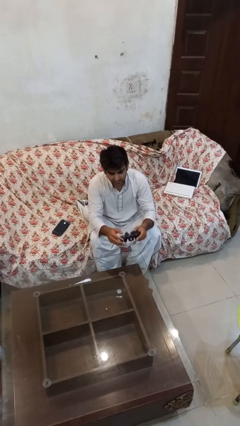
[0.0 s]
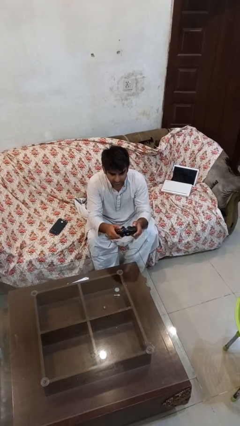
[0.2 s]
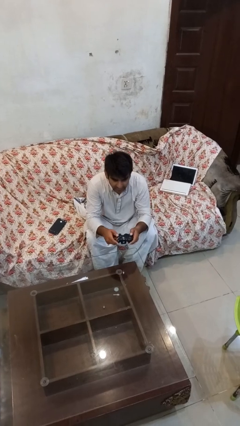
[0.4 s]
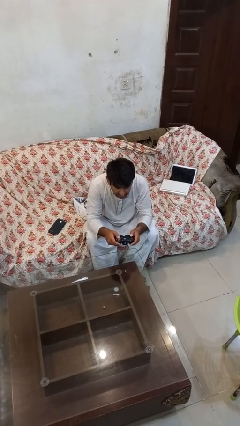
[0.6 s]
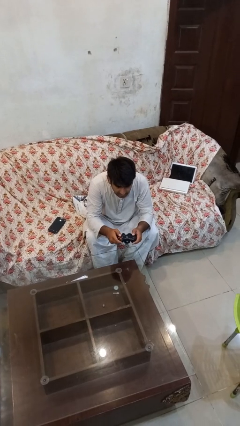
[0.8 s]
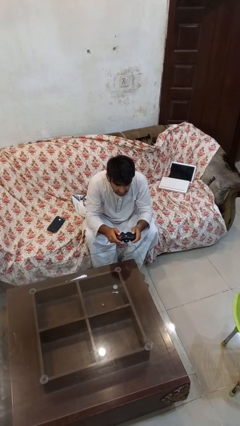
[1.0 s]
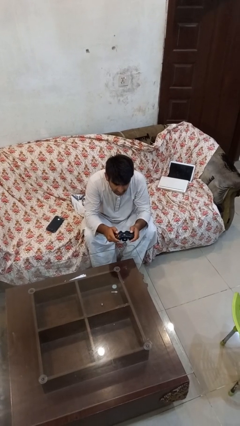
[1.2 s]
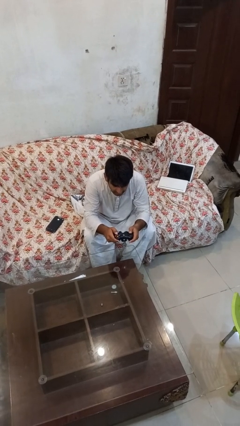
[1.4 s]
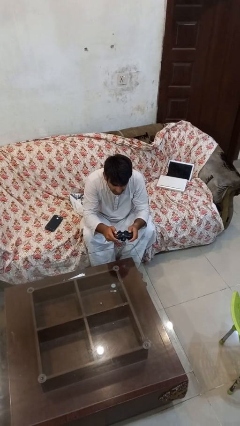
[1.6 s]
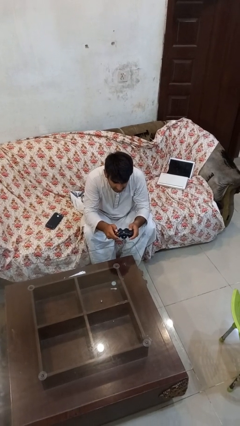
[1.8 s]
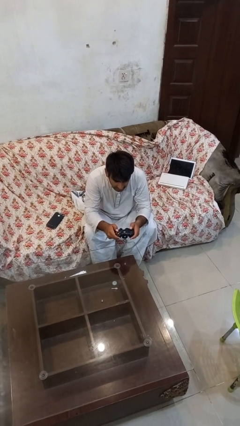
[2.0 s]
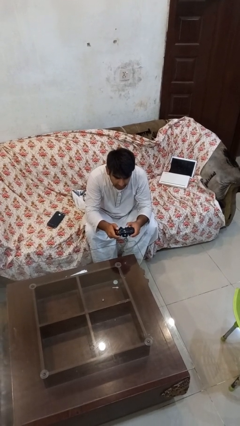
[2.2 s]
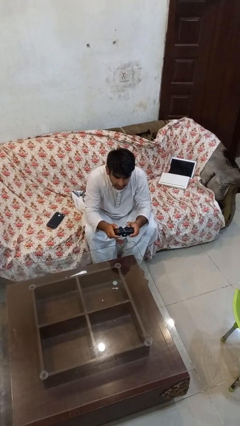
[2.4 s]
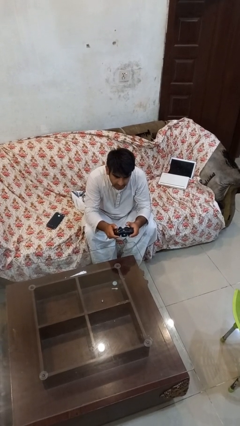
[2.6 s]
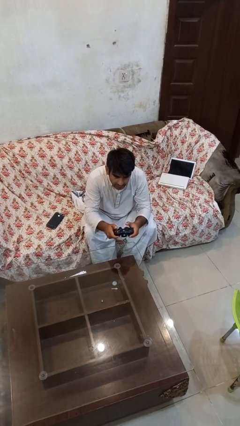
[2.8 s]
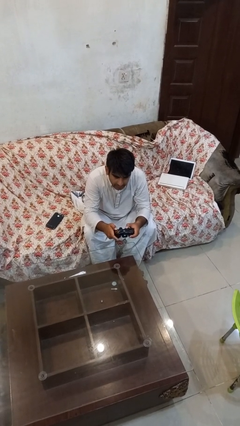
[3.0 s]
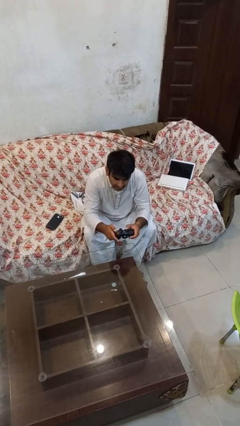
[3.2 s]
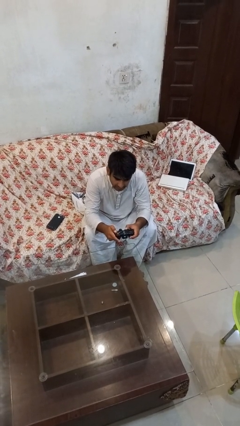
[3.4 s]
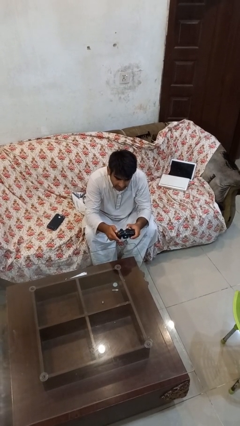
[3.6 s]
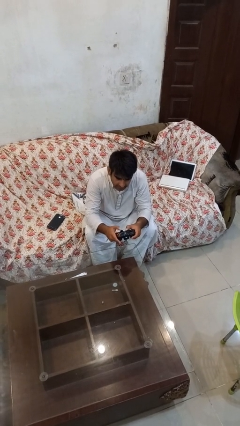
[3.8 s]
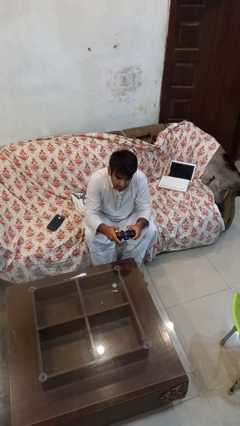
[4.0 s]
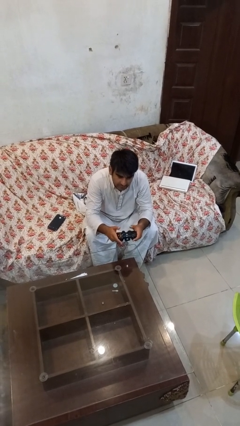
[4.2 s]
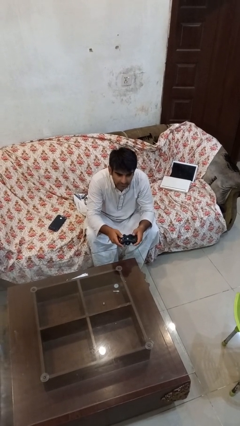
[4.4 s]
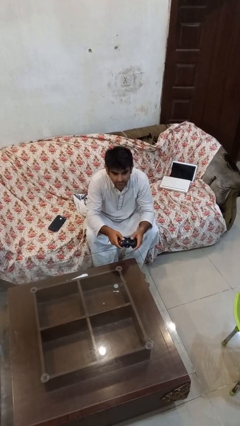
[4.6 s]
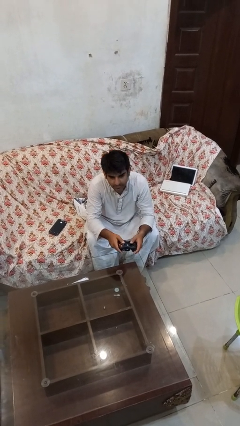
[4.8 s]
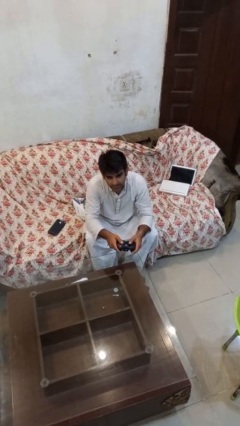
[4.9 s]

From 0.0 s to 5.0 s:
person interacts with handheld game

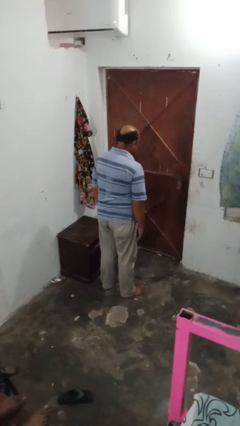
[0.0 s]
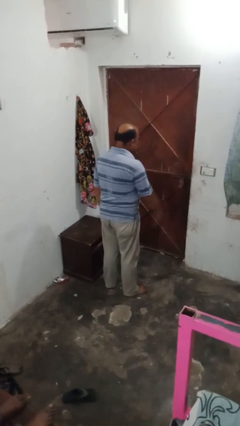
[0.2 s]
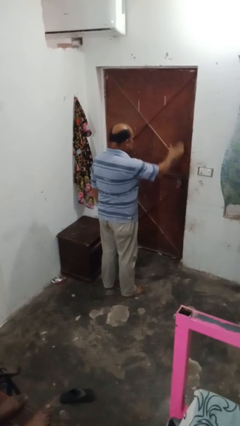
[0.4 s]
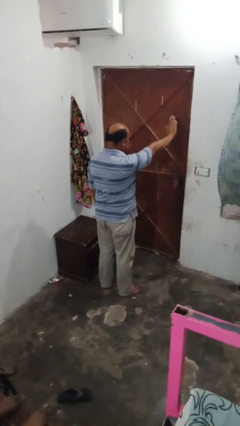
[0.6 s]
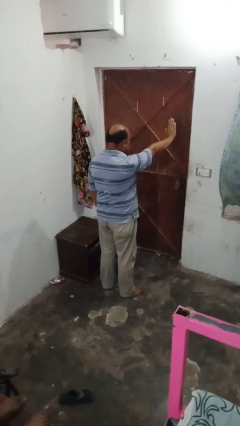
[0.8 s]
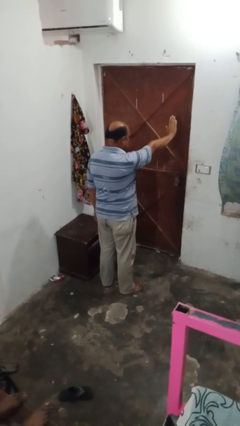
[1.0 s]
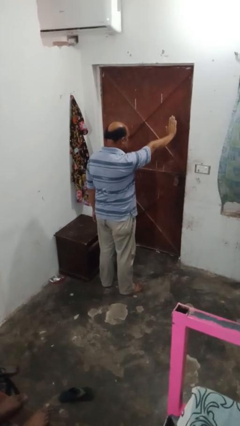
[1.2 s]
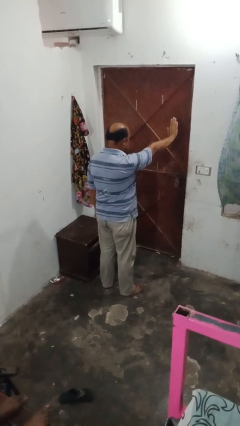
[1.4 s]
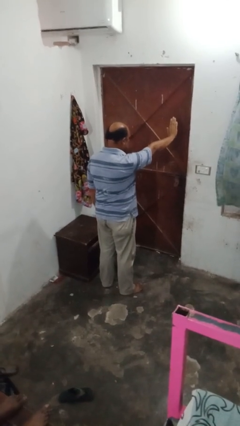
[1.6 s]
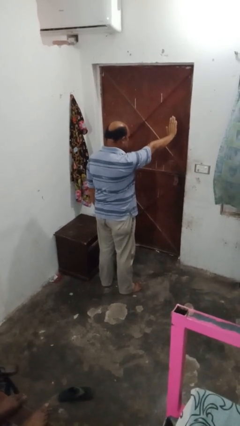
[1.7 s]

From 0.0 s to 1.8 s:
person gestures stop

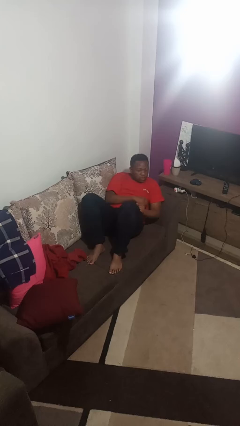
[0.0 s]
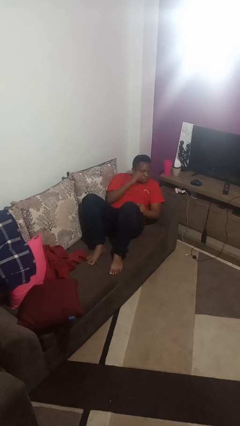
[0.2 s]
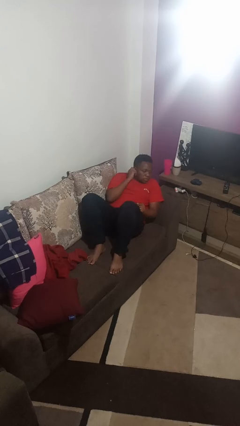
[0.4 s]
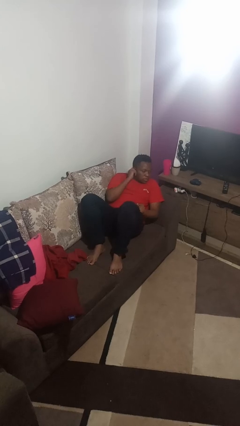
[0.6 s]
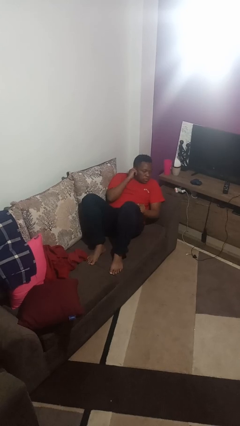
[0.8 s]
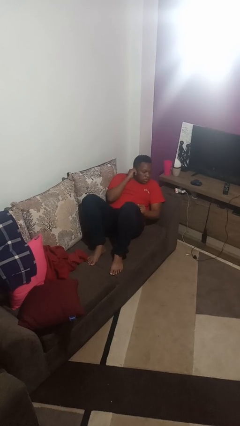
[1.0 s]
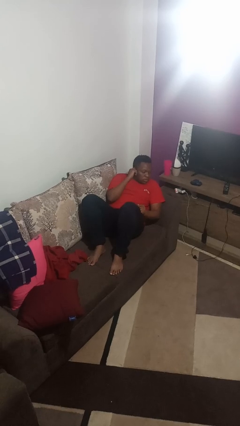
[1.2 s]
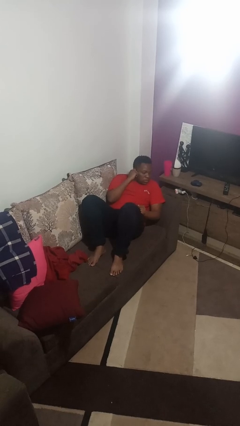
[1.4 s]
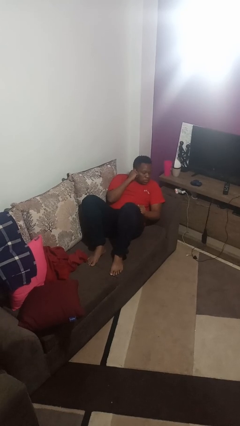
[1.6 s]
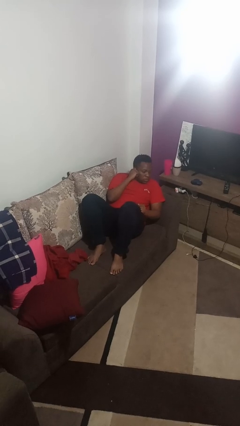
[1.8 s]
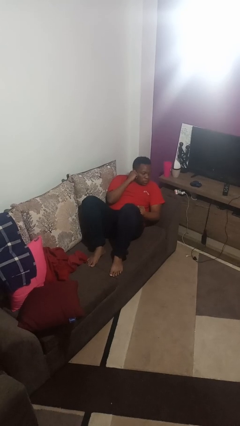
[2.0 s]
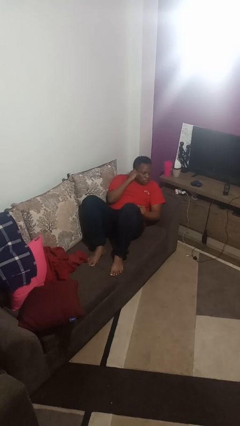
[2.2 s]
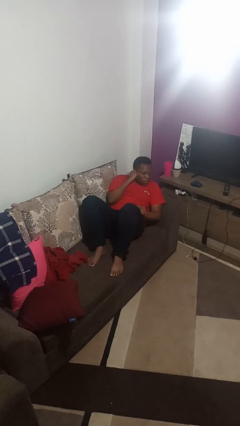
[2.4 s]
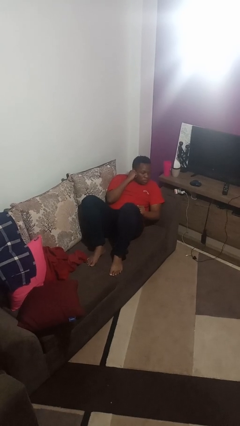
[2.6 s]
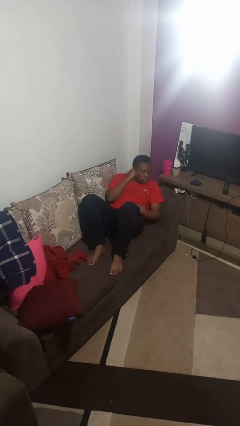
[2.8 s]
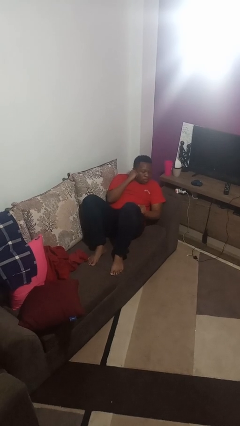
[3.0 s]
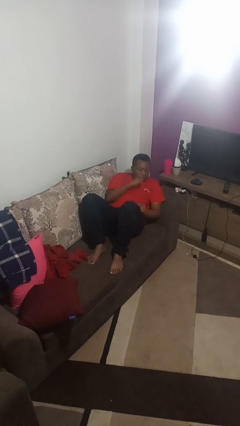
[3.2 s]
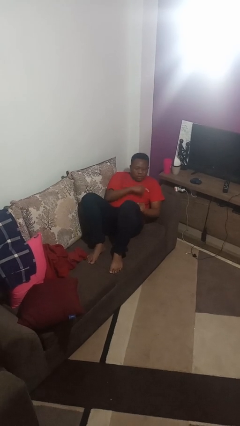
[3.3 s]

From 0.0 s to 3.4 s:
person touches earlobe

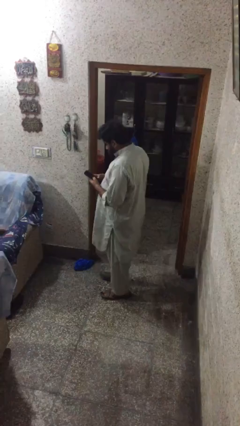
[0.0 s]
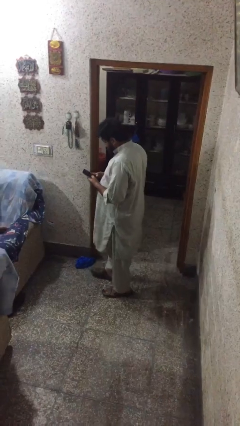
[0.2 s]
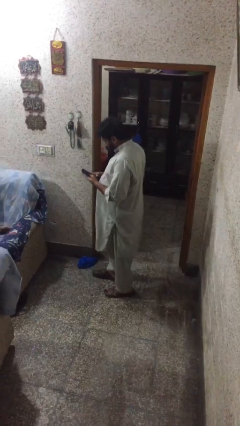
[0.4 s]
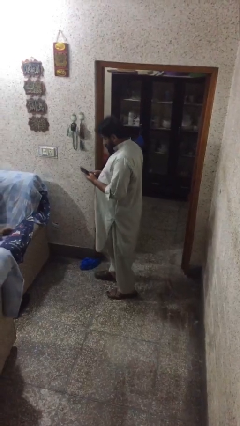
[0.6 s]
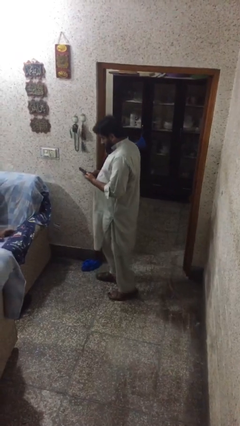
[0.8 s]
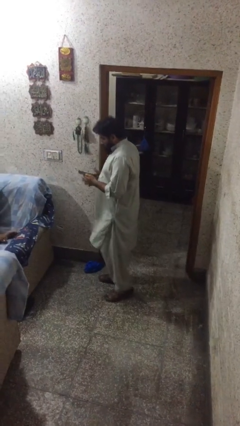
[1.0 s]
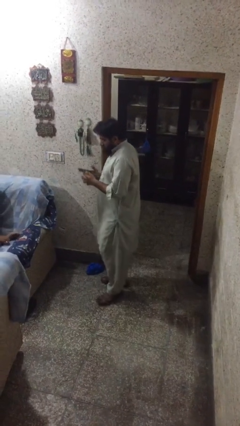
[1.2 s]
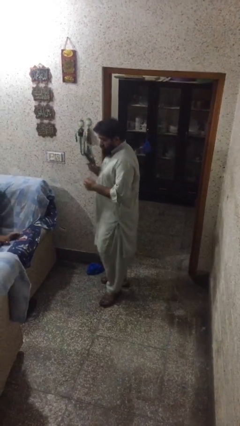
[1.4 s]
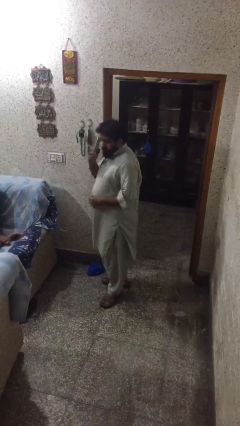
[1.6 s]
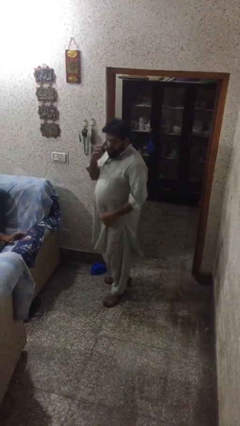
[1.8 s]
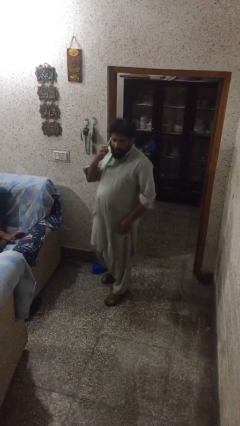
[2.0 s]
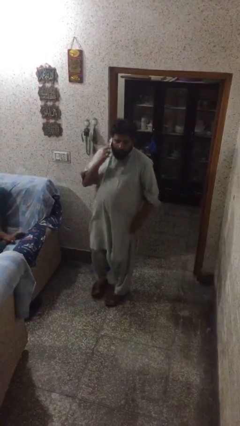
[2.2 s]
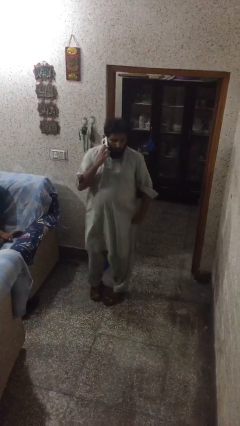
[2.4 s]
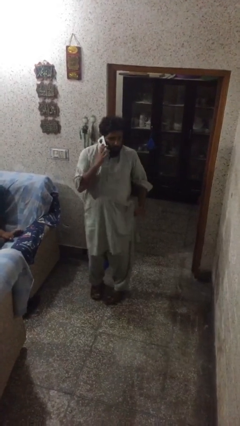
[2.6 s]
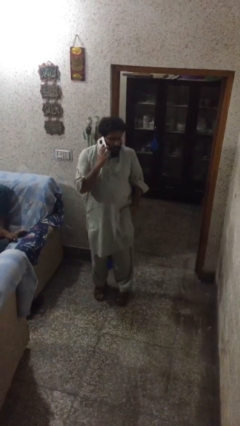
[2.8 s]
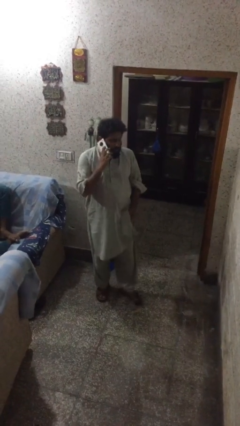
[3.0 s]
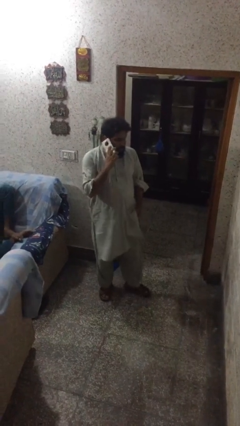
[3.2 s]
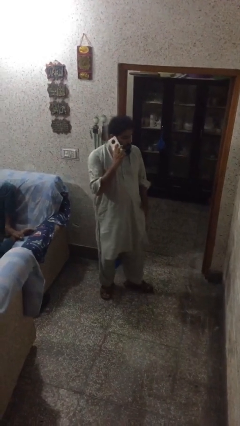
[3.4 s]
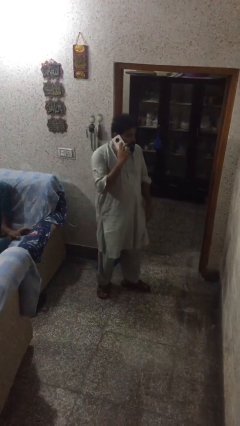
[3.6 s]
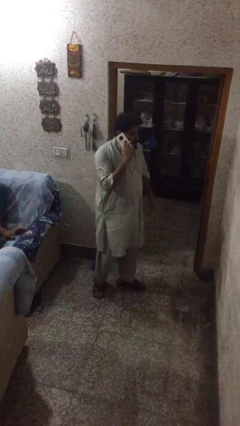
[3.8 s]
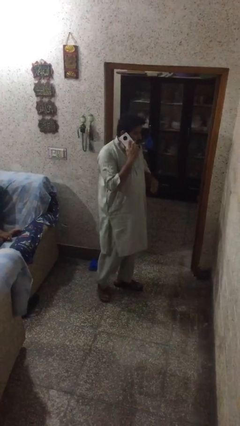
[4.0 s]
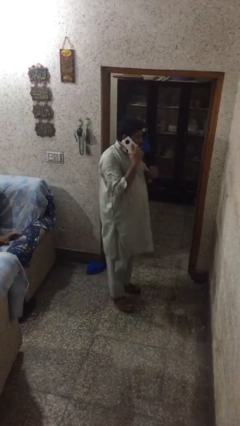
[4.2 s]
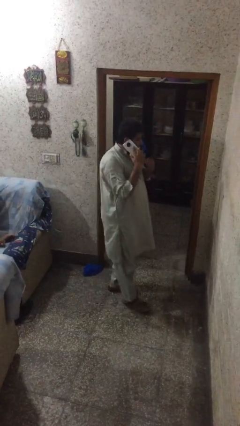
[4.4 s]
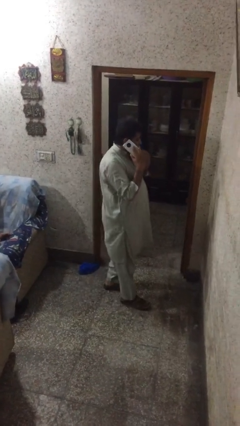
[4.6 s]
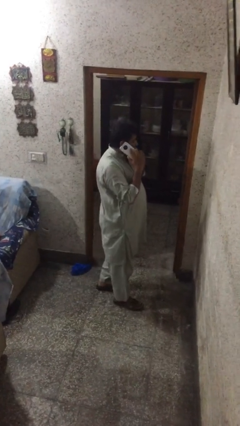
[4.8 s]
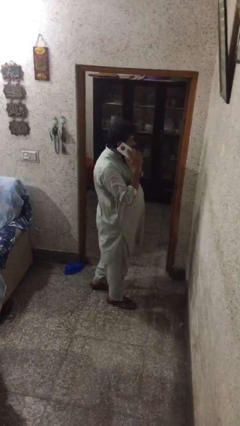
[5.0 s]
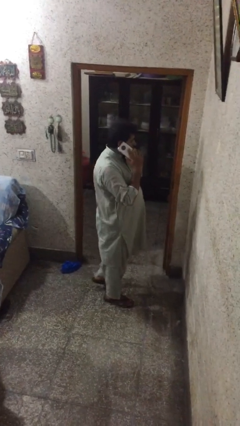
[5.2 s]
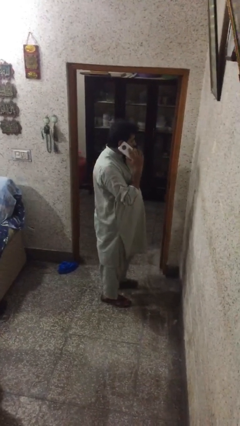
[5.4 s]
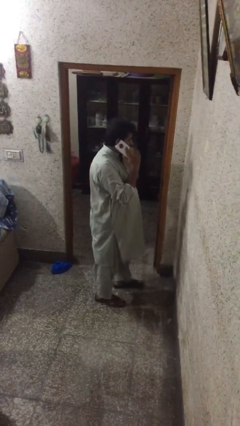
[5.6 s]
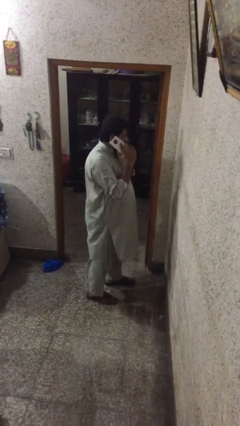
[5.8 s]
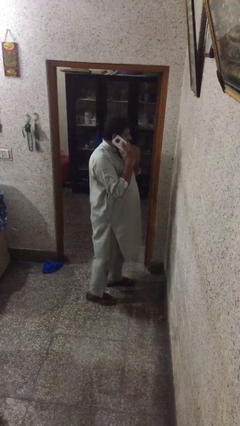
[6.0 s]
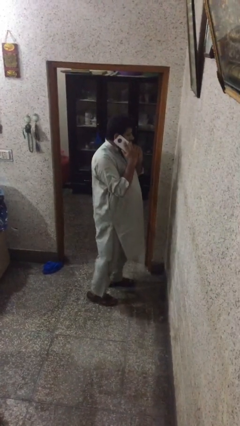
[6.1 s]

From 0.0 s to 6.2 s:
person talks on phone

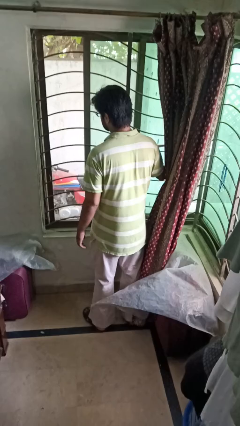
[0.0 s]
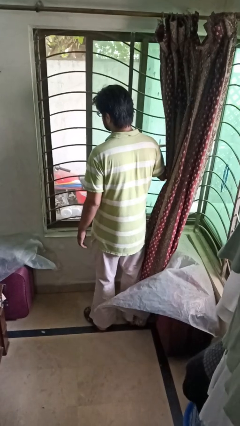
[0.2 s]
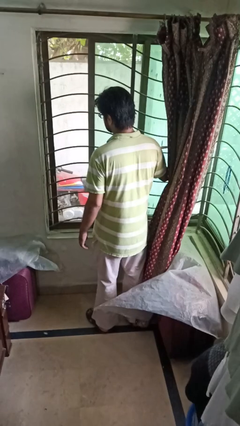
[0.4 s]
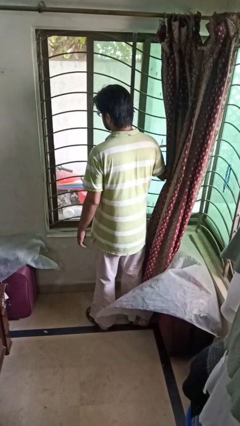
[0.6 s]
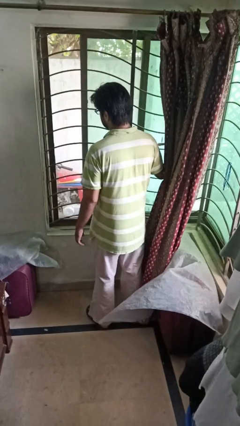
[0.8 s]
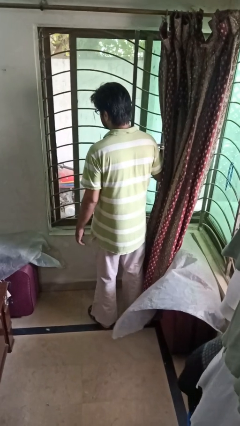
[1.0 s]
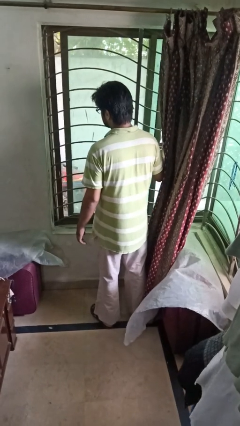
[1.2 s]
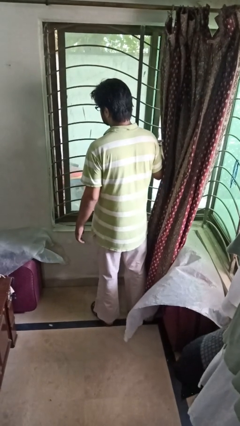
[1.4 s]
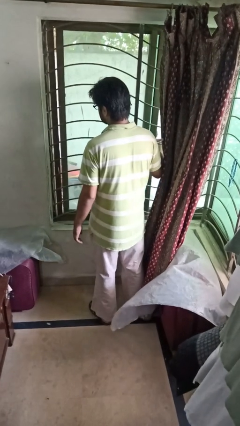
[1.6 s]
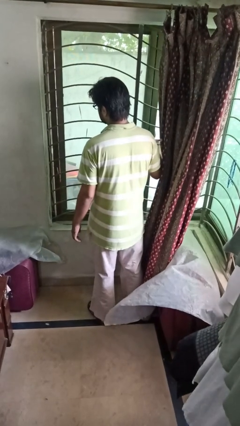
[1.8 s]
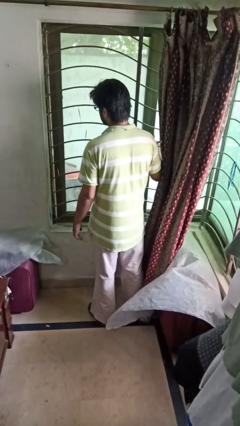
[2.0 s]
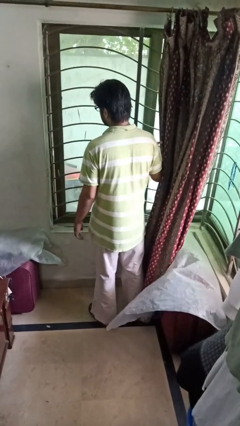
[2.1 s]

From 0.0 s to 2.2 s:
person closes home window
